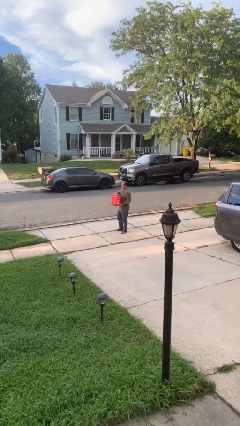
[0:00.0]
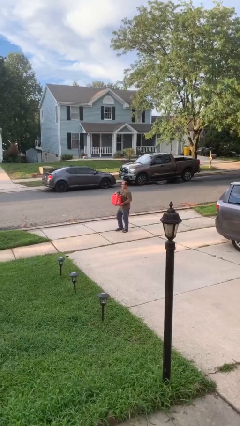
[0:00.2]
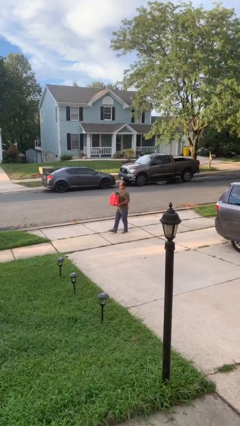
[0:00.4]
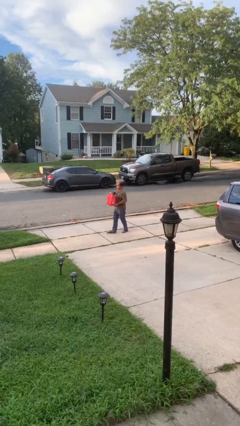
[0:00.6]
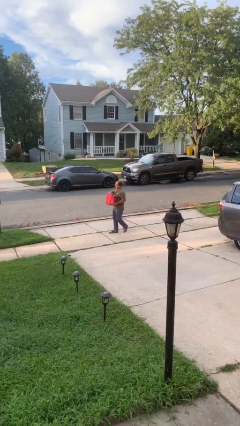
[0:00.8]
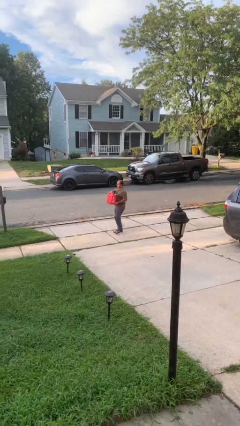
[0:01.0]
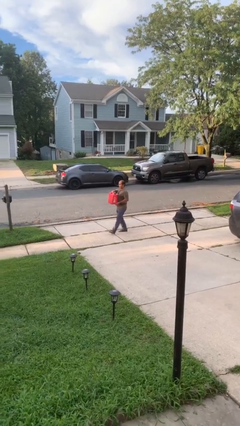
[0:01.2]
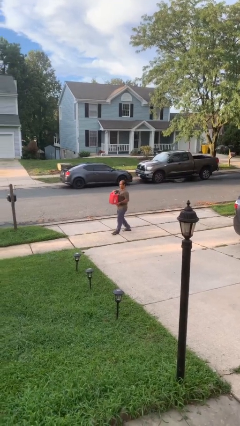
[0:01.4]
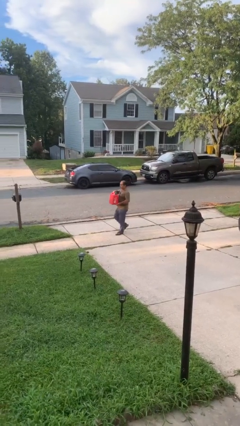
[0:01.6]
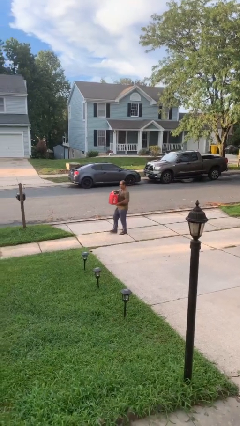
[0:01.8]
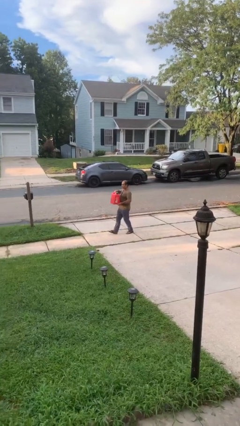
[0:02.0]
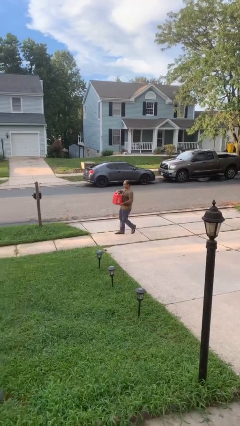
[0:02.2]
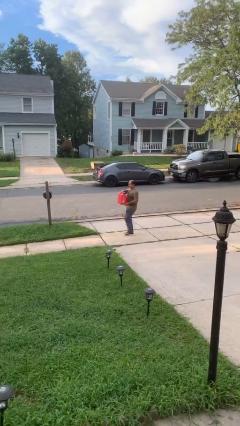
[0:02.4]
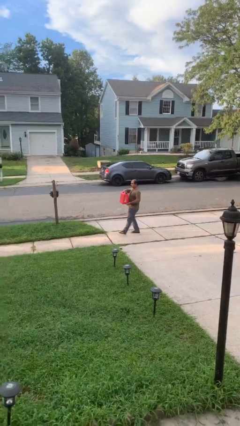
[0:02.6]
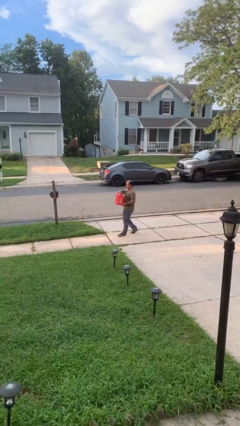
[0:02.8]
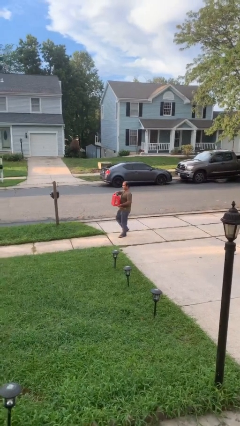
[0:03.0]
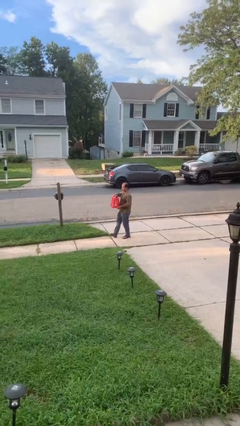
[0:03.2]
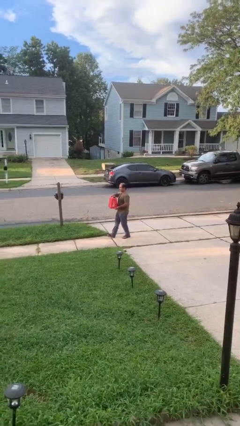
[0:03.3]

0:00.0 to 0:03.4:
person carries heavy object

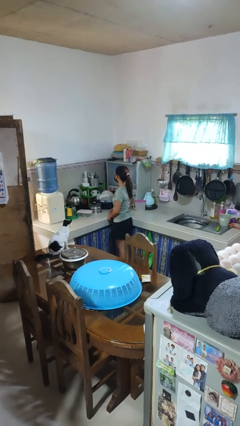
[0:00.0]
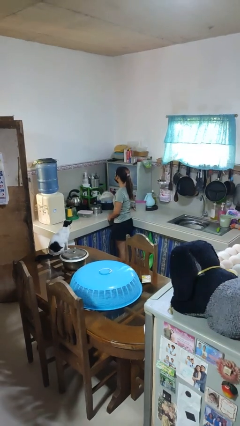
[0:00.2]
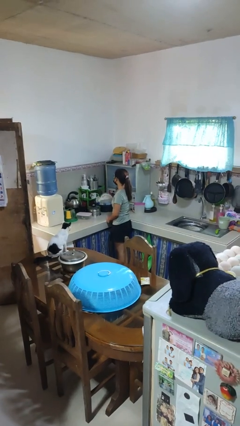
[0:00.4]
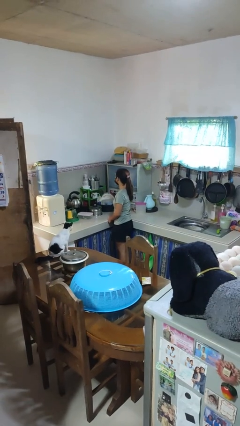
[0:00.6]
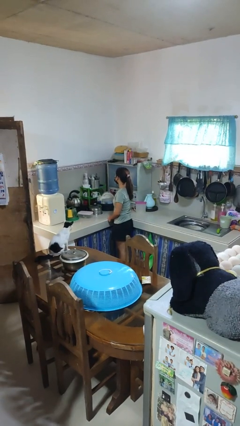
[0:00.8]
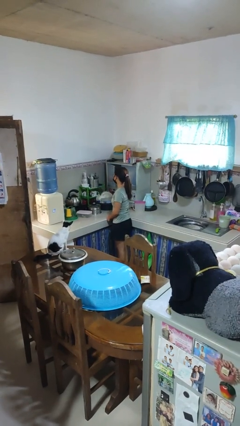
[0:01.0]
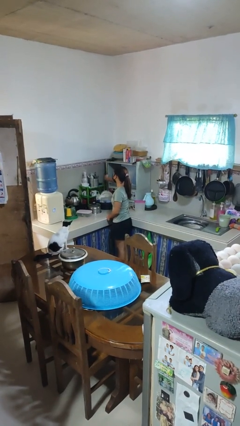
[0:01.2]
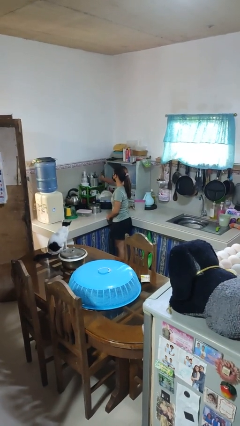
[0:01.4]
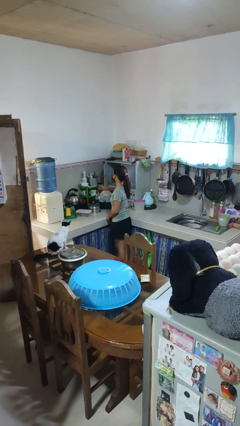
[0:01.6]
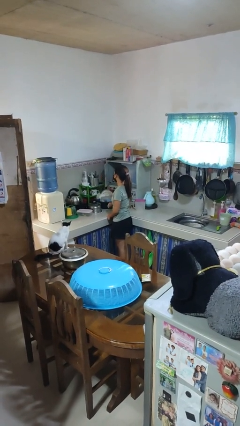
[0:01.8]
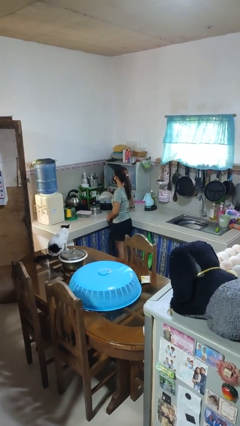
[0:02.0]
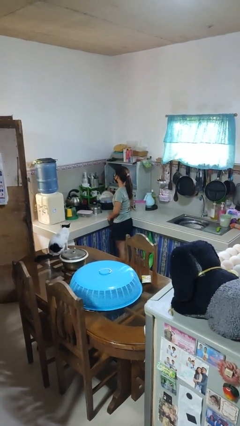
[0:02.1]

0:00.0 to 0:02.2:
person opens kitchen drawer

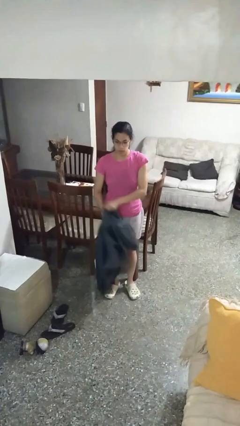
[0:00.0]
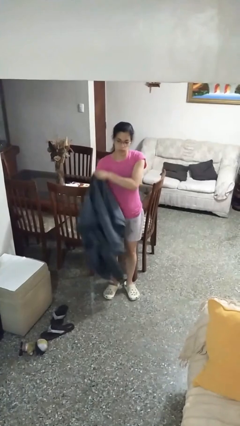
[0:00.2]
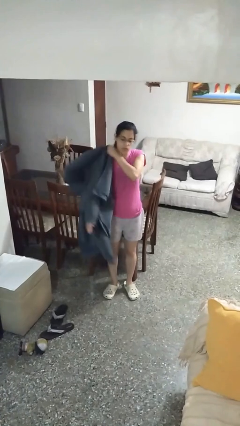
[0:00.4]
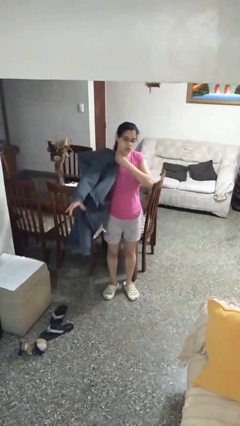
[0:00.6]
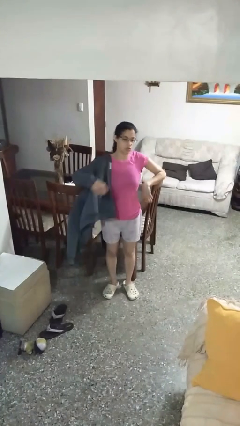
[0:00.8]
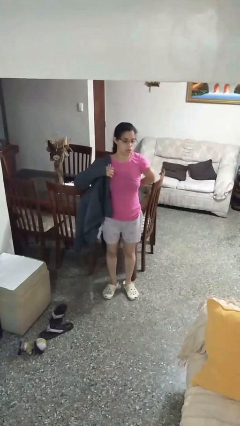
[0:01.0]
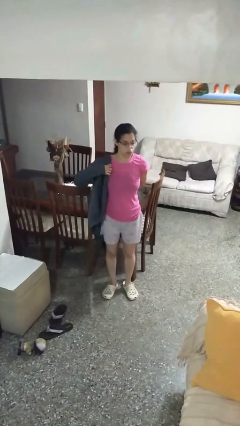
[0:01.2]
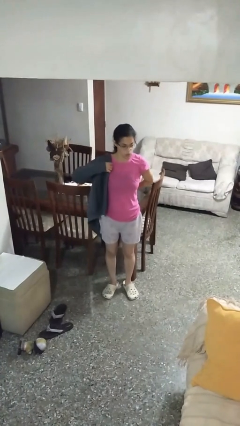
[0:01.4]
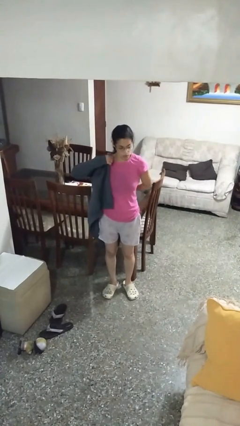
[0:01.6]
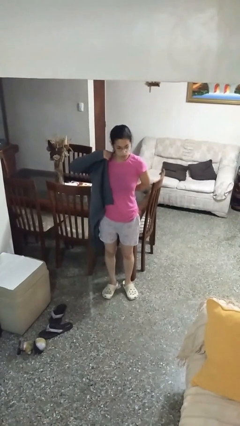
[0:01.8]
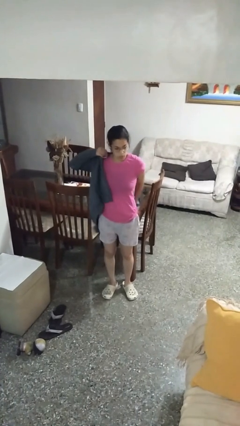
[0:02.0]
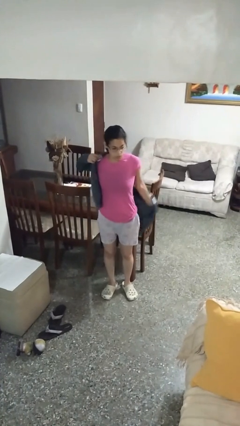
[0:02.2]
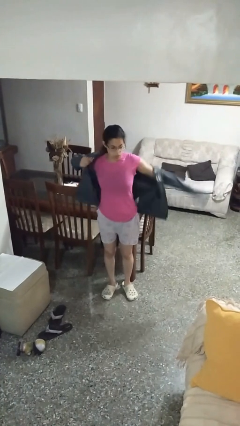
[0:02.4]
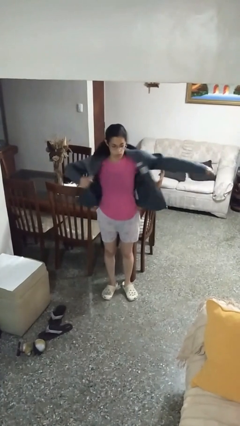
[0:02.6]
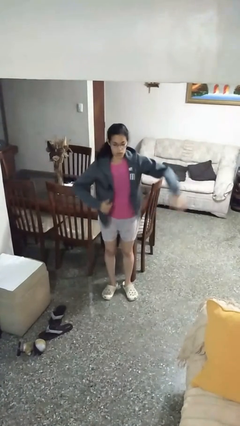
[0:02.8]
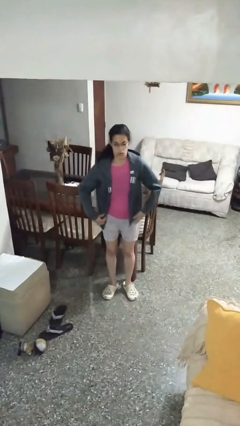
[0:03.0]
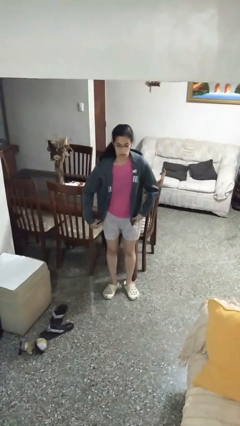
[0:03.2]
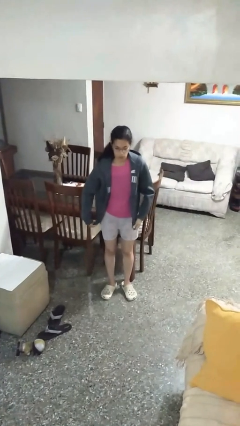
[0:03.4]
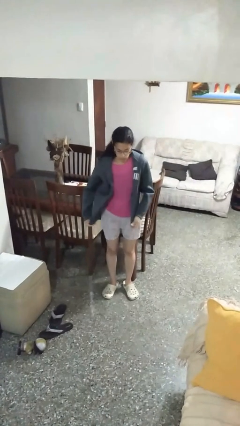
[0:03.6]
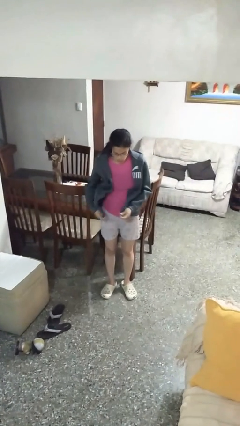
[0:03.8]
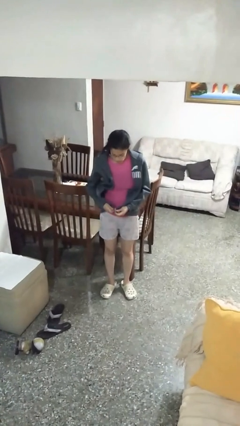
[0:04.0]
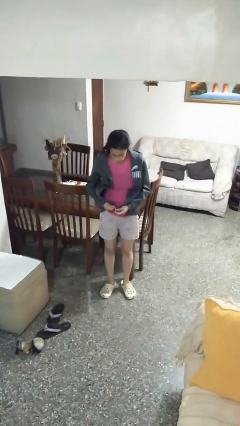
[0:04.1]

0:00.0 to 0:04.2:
person puts on jacket

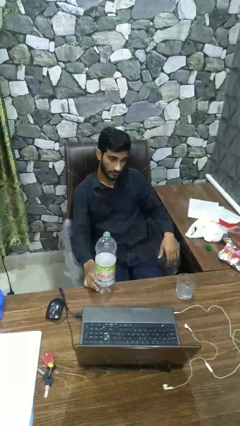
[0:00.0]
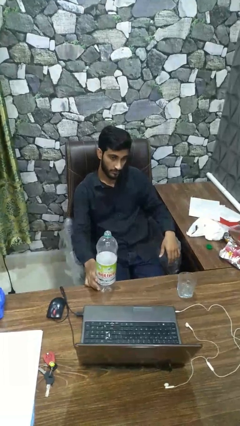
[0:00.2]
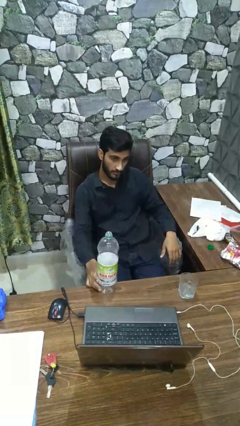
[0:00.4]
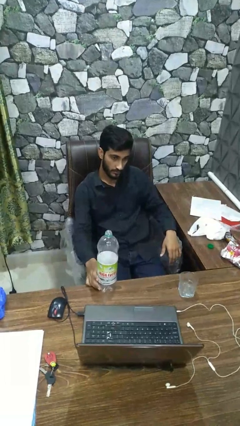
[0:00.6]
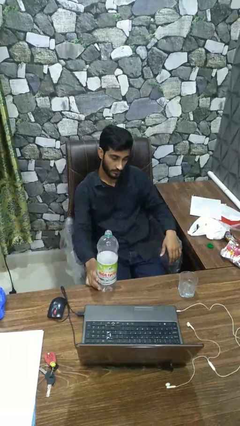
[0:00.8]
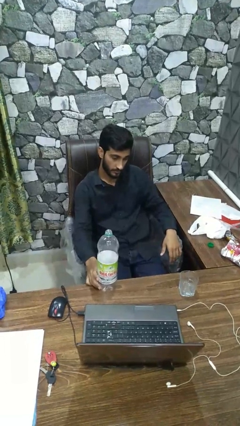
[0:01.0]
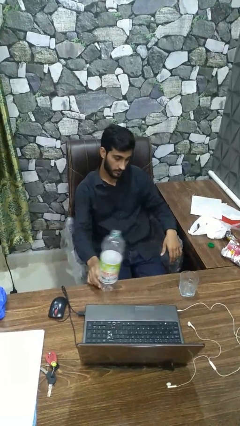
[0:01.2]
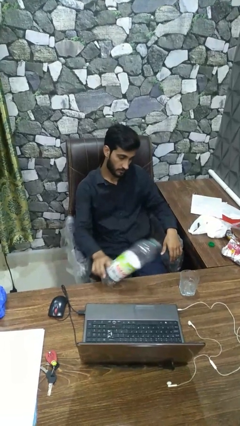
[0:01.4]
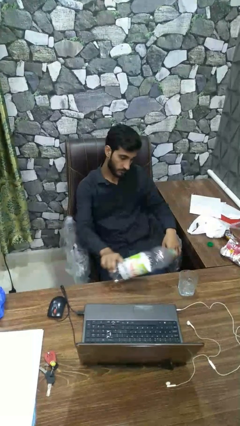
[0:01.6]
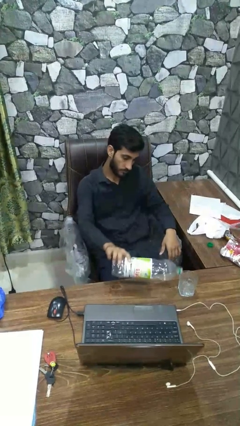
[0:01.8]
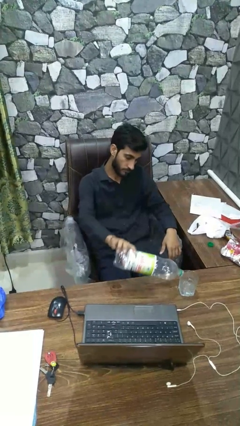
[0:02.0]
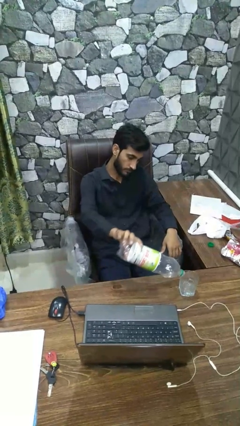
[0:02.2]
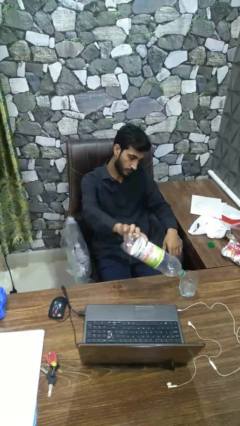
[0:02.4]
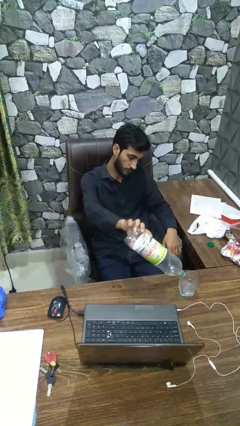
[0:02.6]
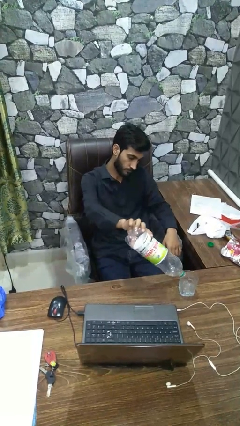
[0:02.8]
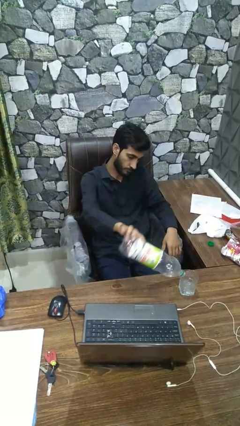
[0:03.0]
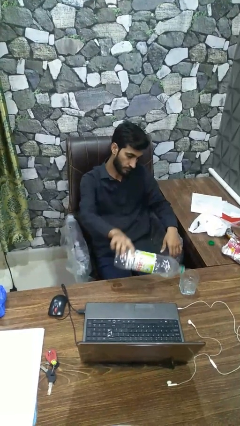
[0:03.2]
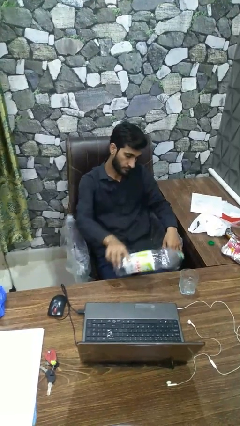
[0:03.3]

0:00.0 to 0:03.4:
person pours liquid into cup

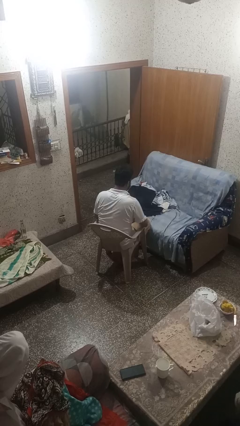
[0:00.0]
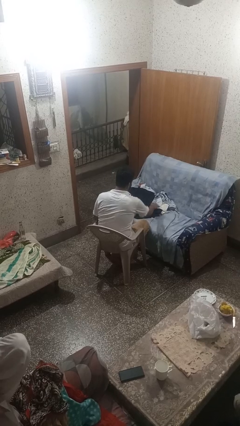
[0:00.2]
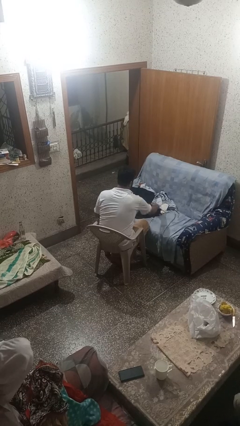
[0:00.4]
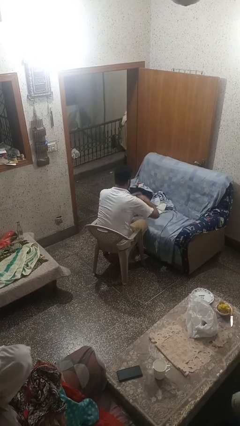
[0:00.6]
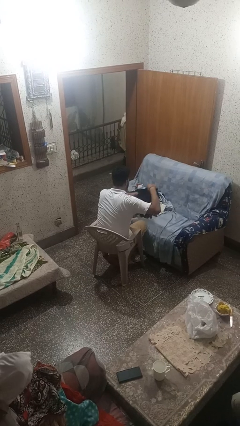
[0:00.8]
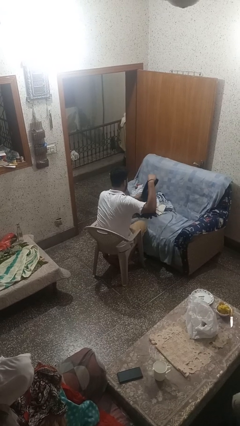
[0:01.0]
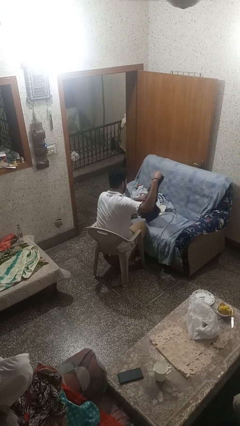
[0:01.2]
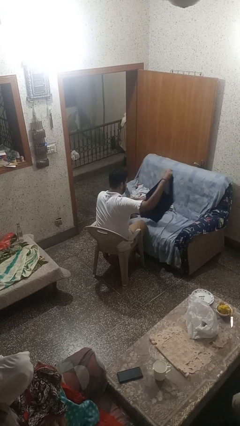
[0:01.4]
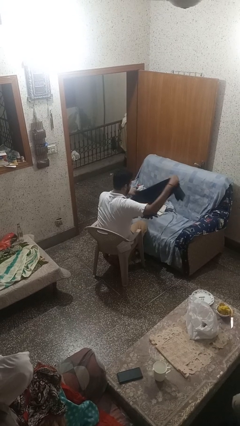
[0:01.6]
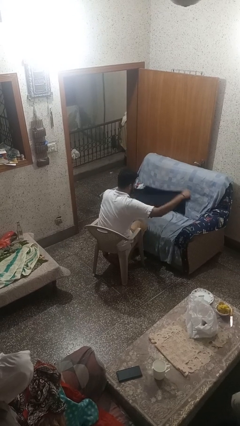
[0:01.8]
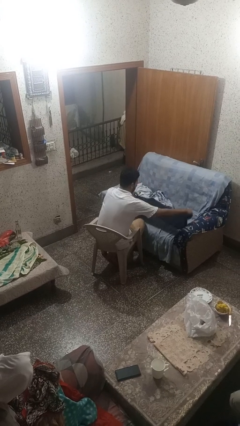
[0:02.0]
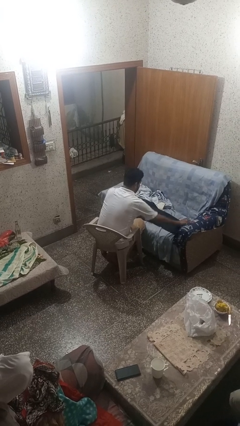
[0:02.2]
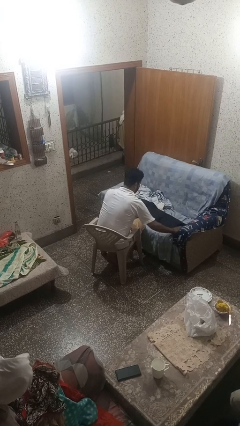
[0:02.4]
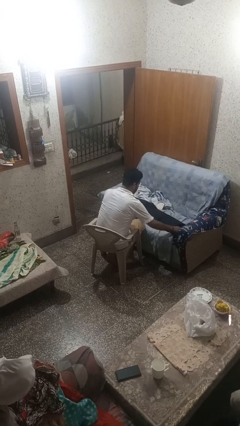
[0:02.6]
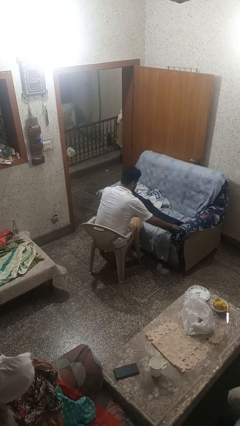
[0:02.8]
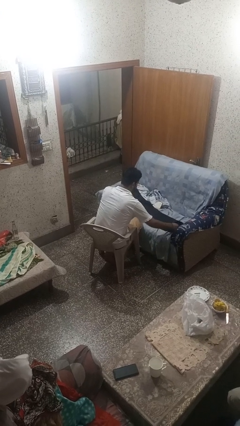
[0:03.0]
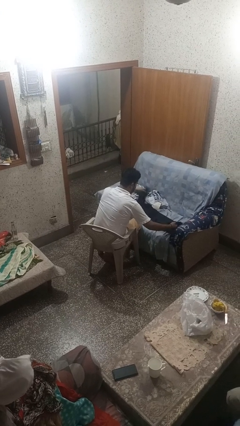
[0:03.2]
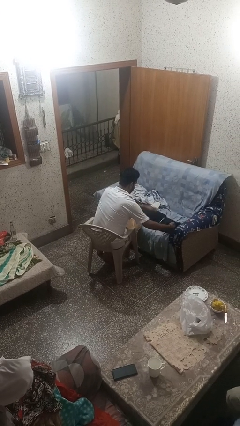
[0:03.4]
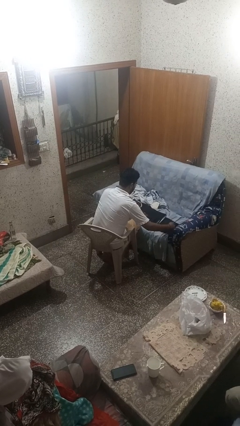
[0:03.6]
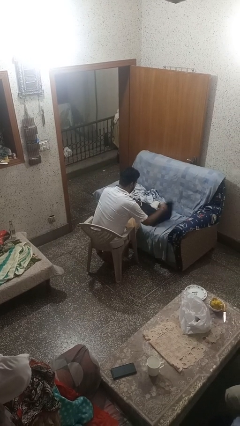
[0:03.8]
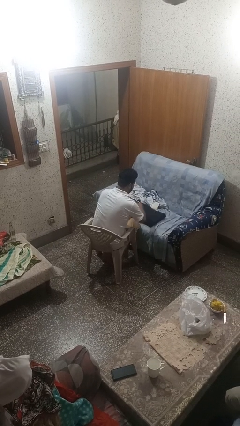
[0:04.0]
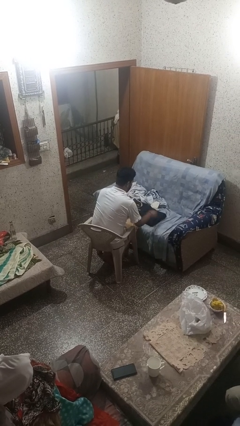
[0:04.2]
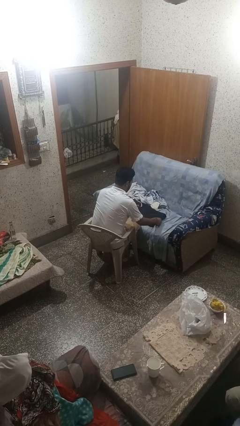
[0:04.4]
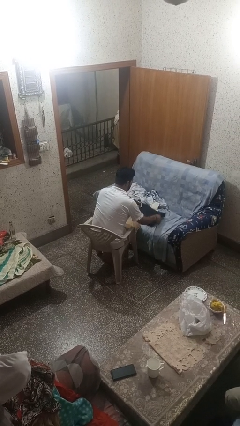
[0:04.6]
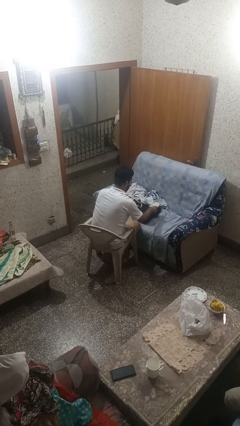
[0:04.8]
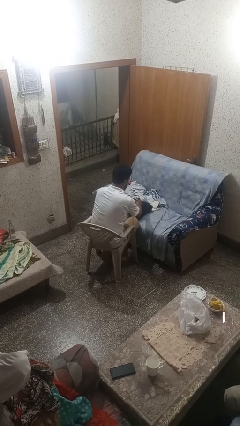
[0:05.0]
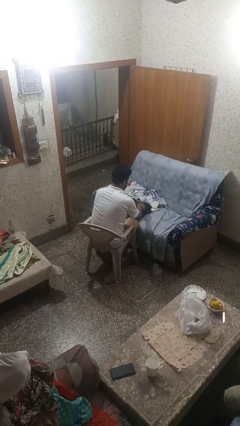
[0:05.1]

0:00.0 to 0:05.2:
person folds pants
